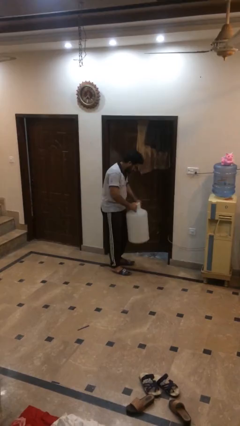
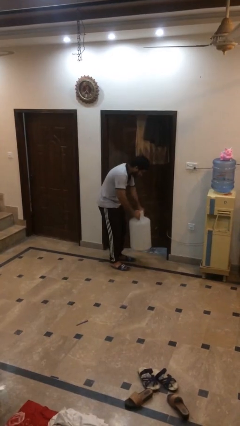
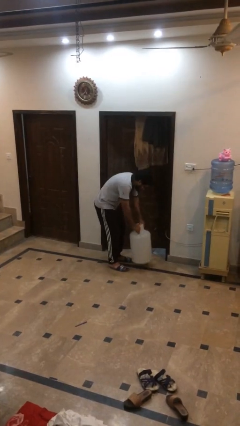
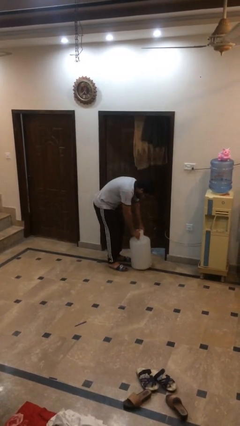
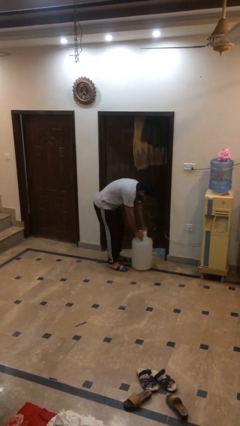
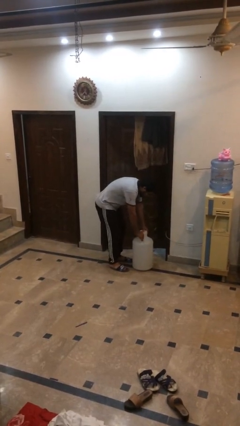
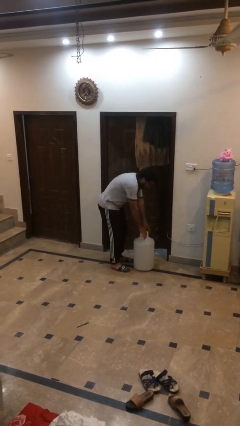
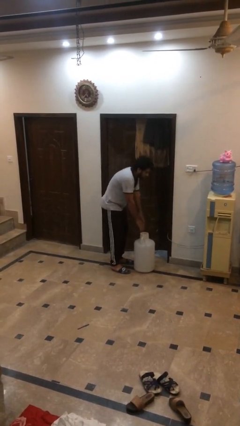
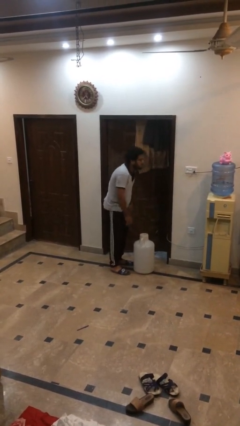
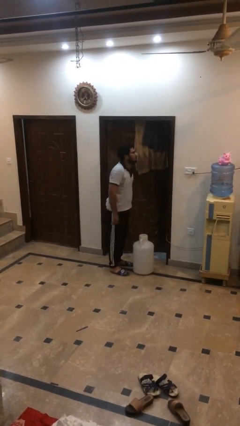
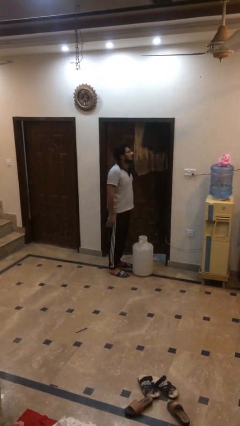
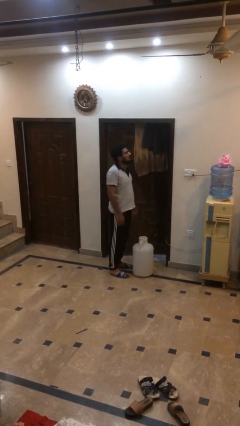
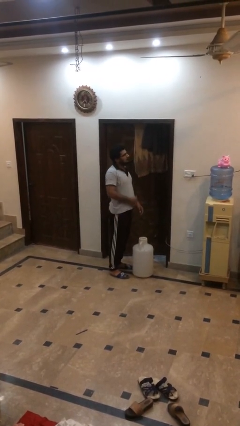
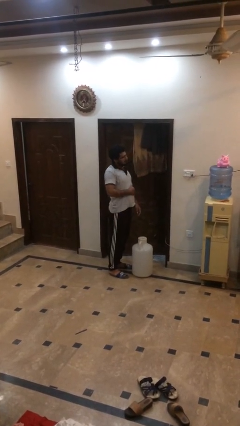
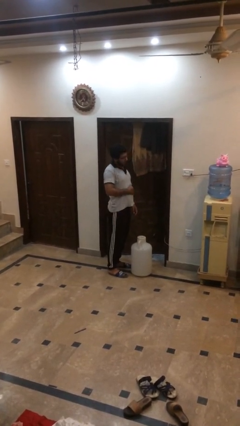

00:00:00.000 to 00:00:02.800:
person puts down object on floor

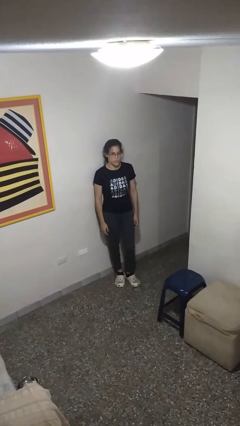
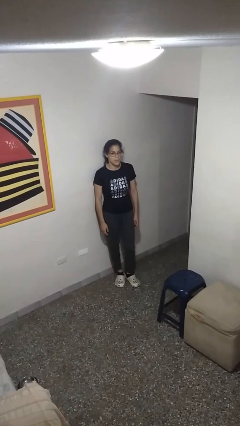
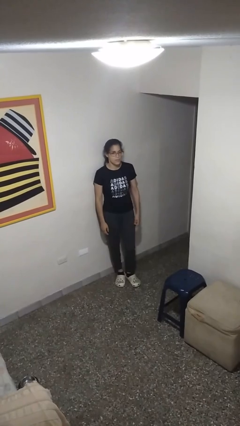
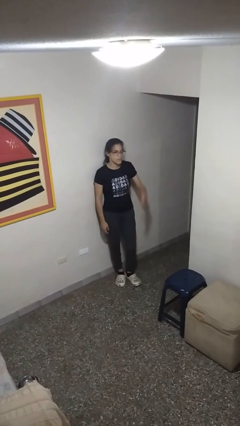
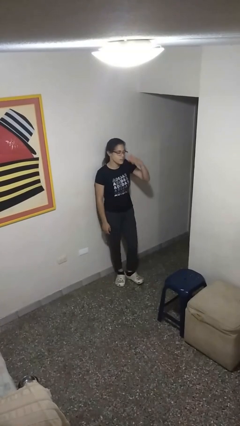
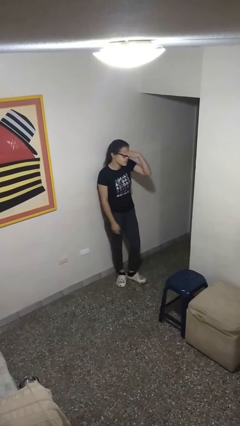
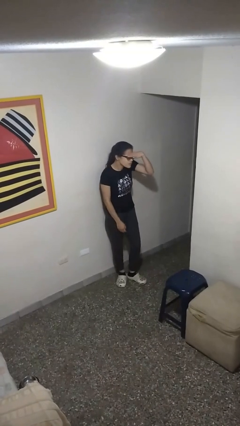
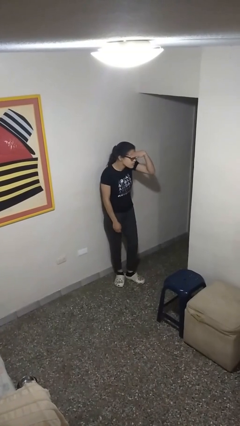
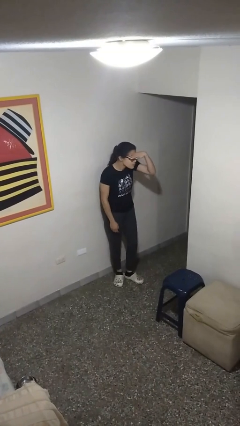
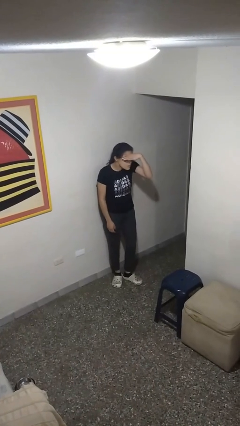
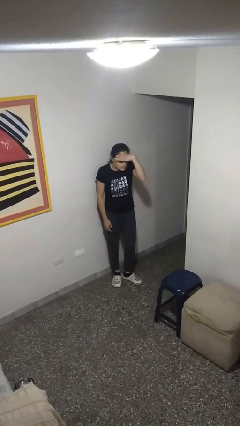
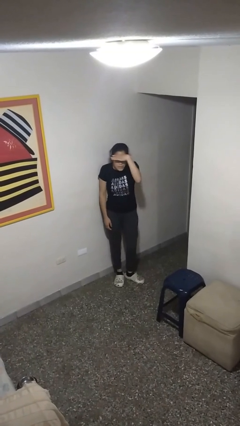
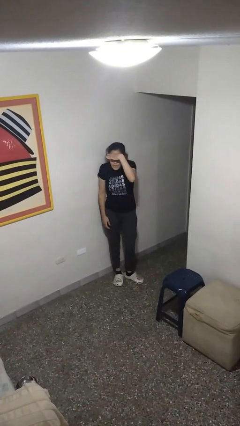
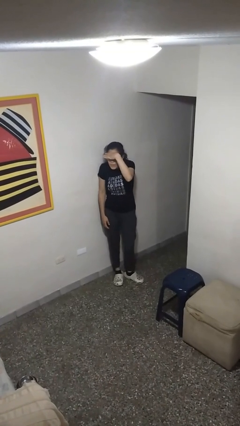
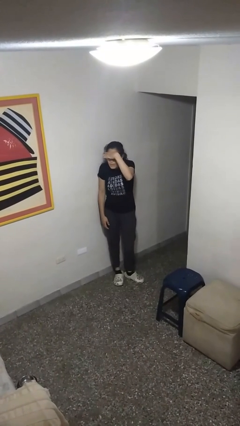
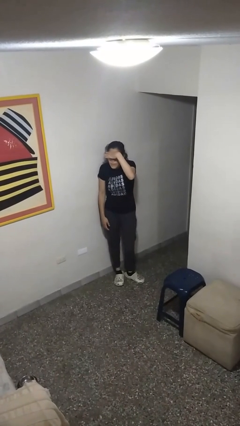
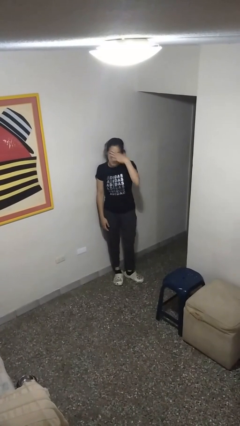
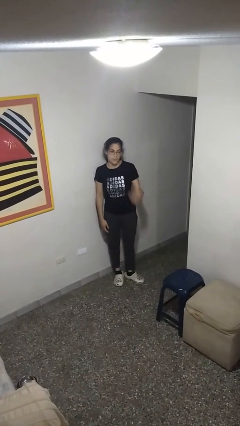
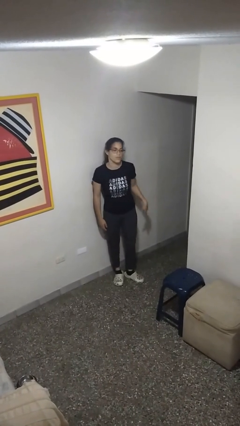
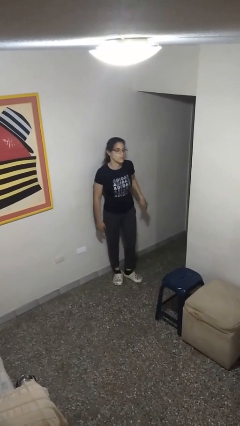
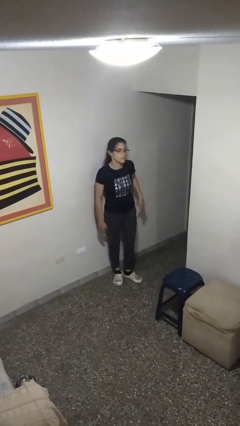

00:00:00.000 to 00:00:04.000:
person shades eyes

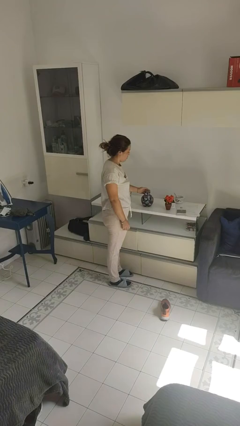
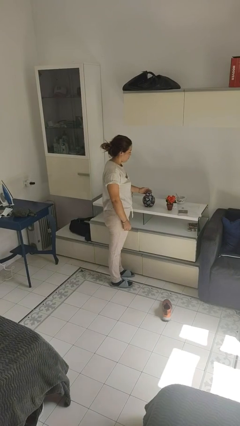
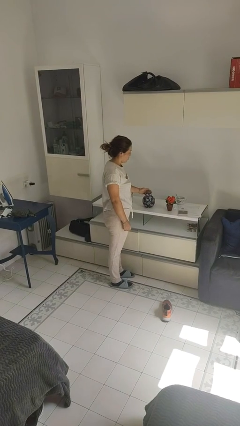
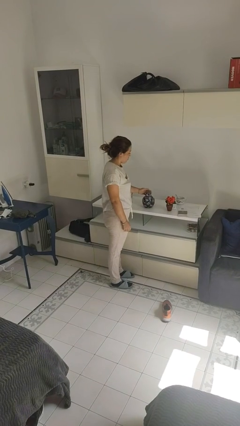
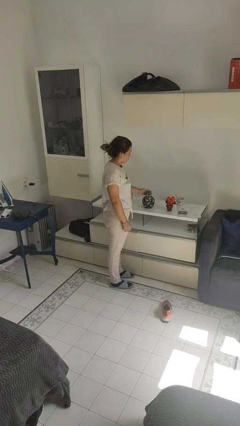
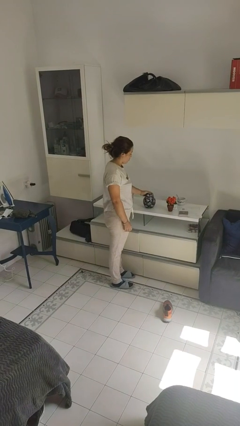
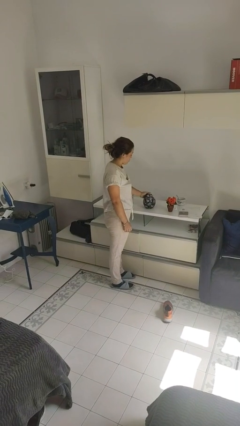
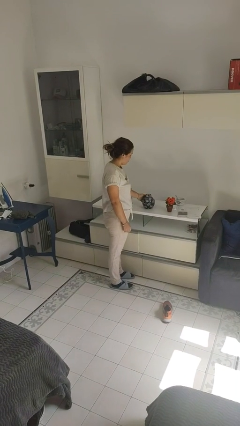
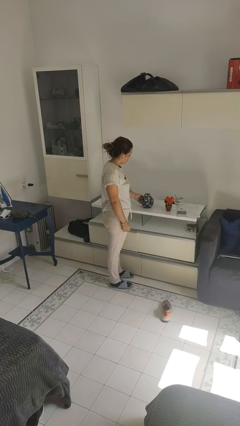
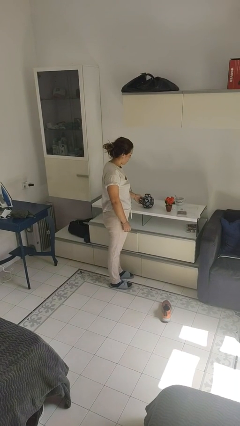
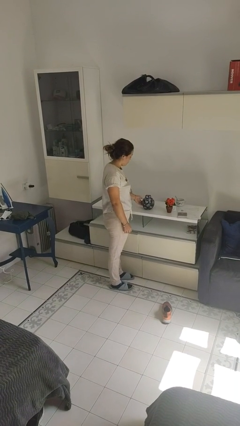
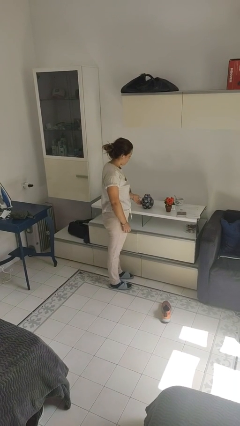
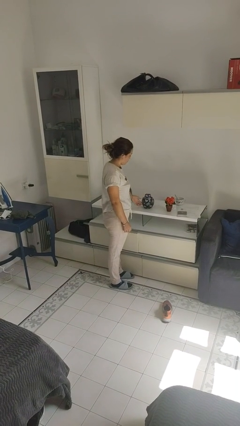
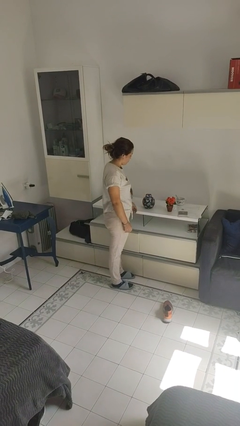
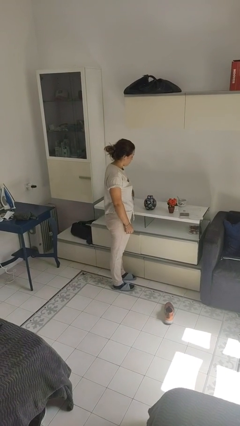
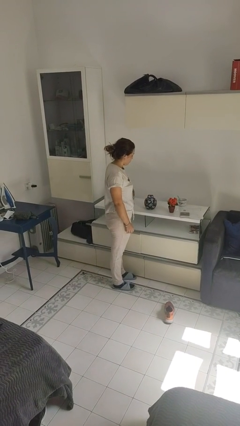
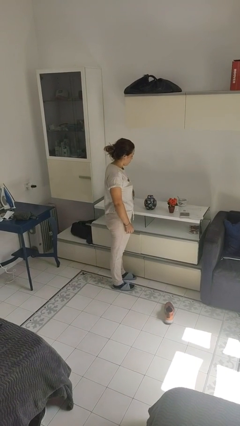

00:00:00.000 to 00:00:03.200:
person waves hand over object

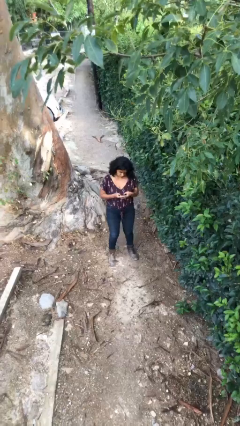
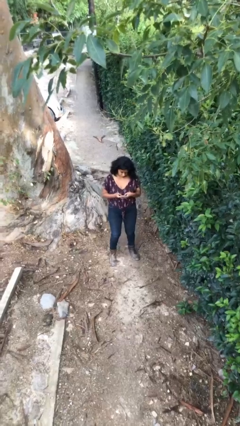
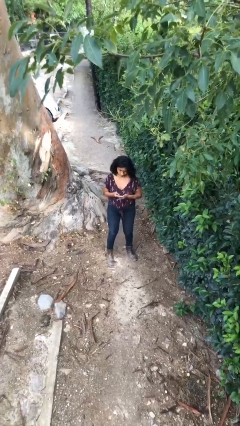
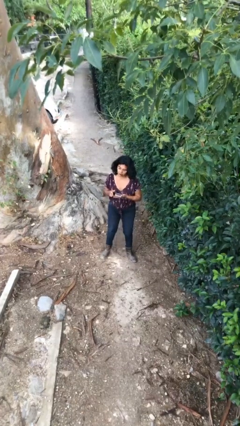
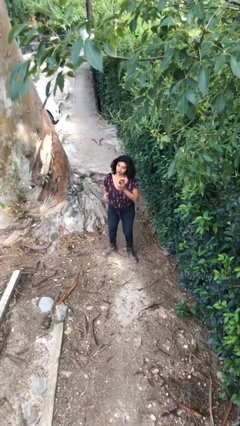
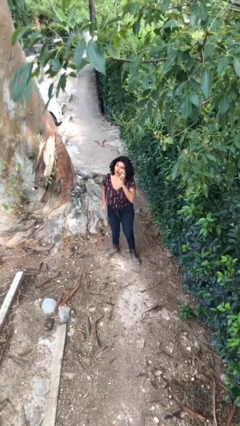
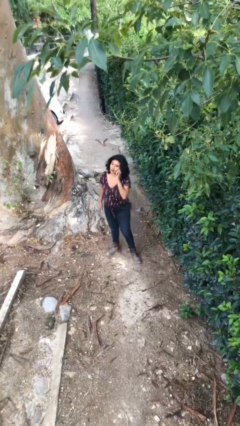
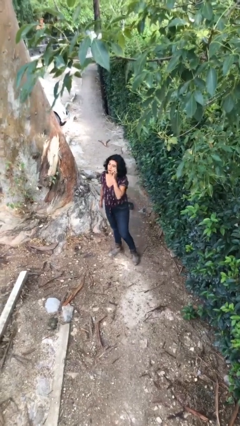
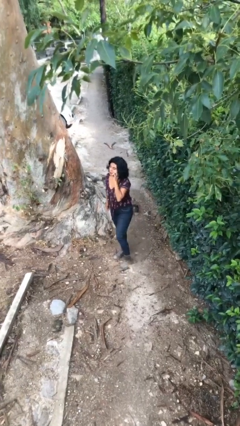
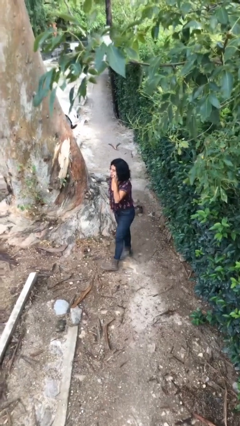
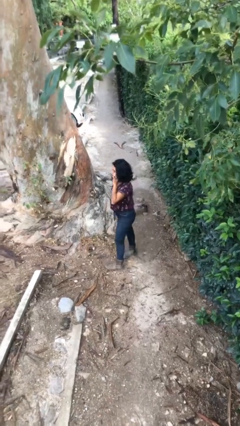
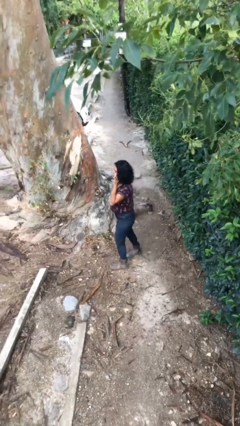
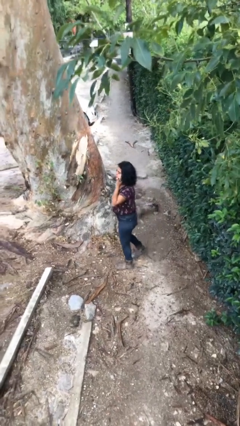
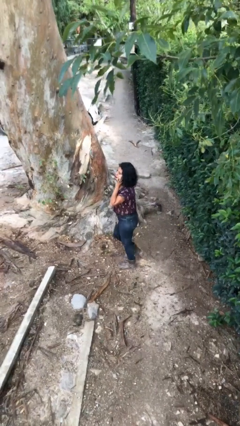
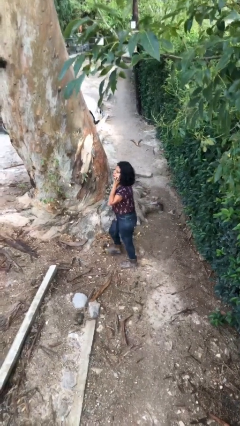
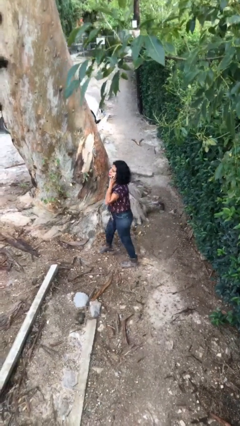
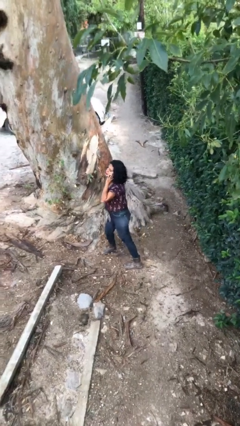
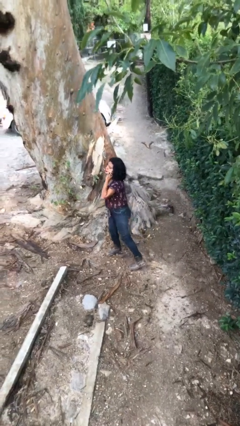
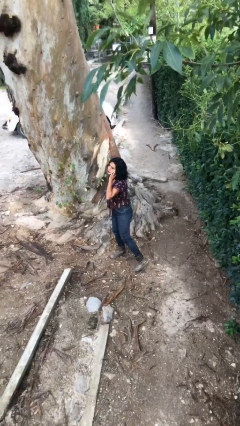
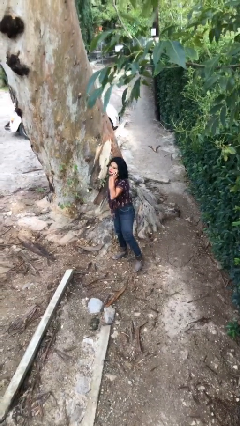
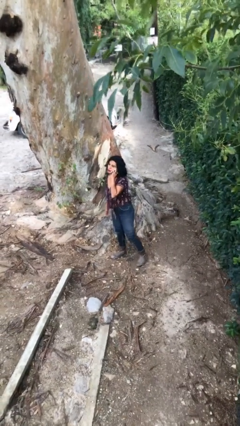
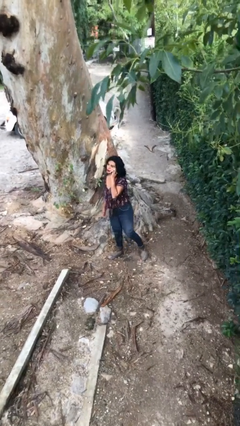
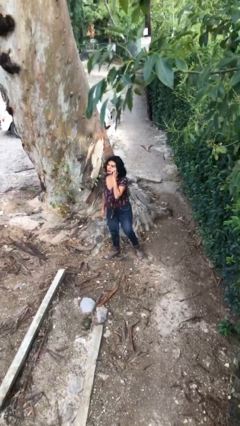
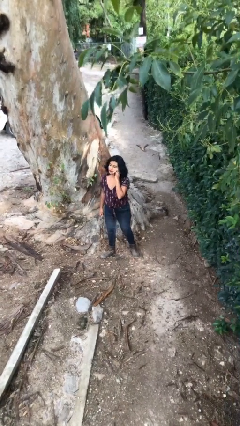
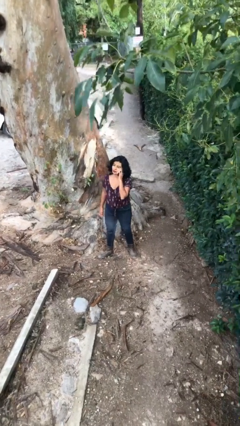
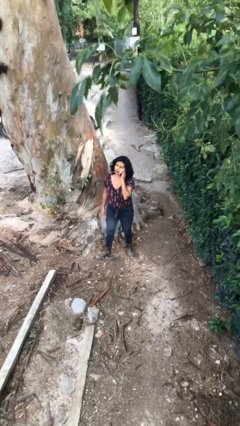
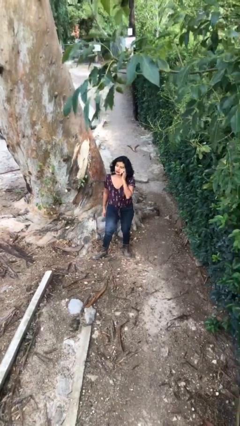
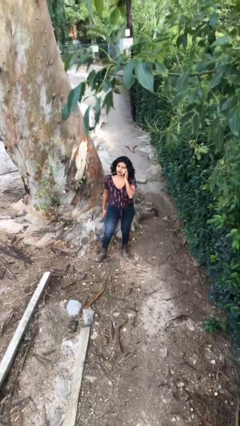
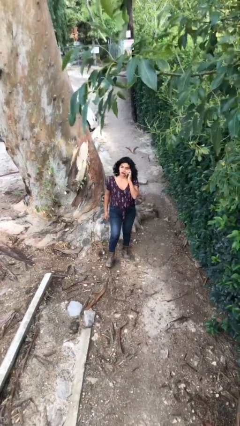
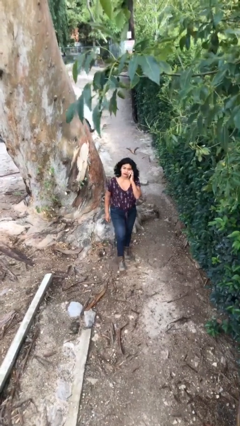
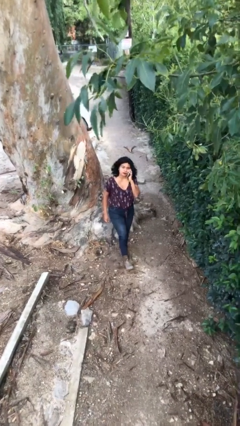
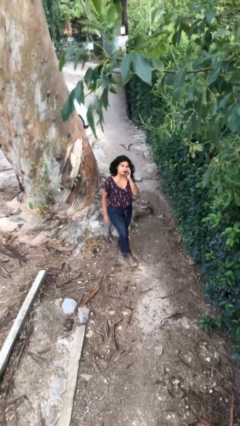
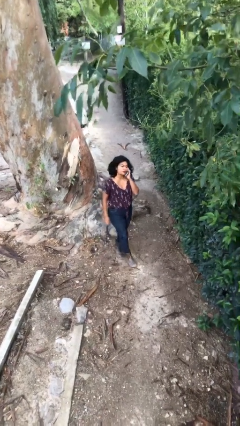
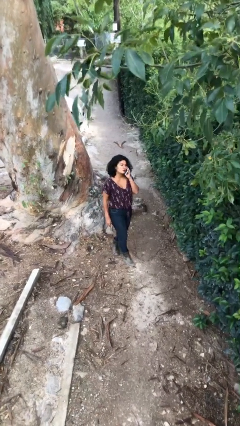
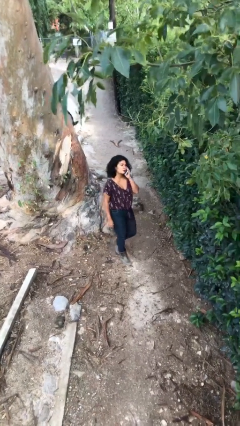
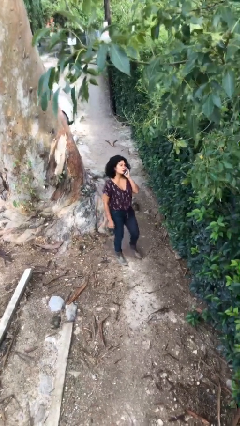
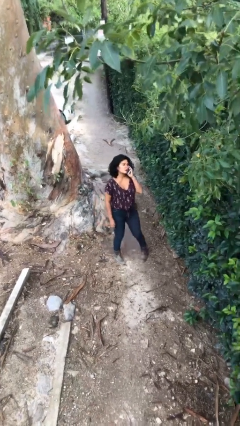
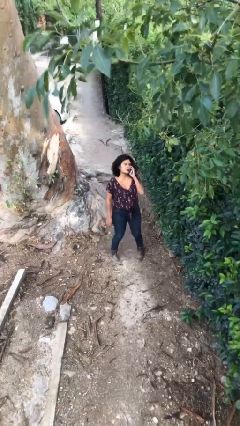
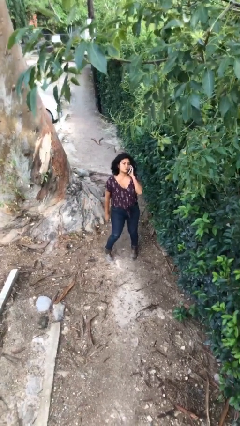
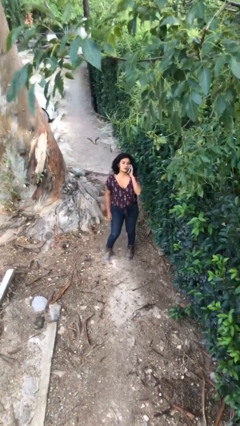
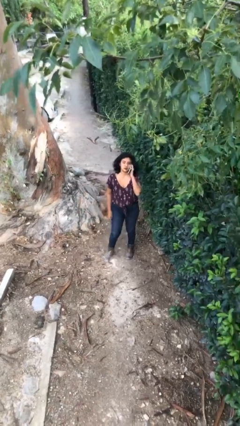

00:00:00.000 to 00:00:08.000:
person talks on phone
